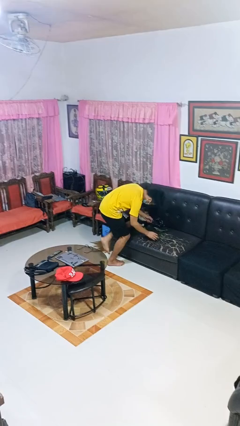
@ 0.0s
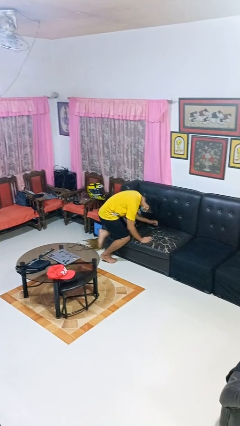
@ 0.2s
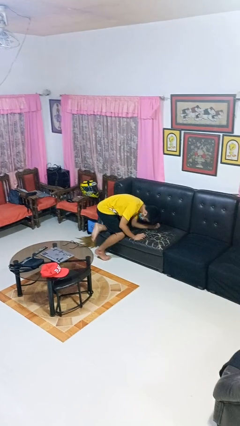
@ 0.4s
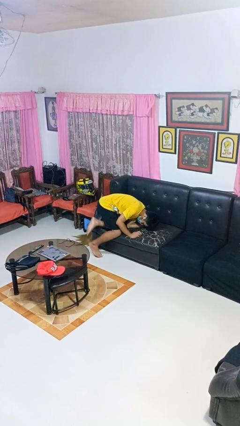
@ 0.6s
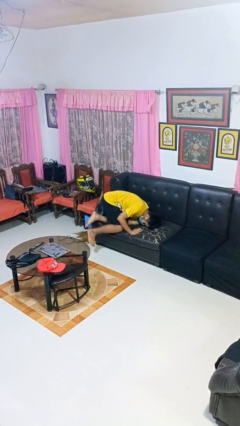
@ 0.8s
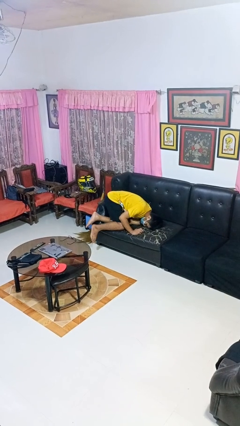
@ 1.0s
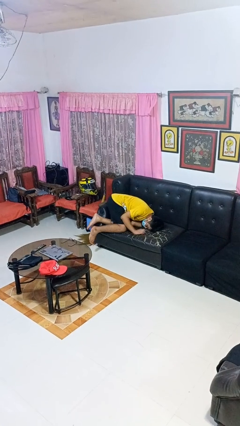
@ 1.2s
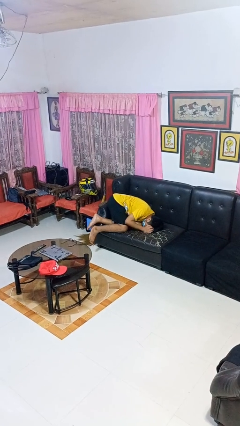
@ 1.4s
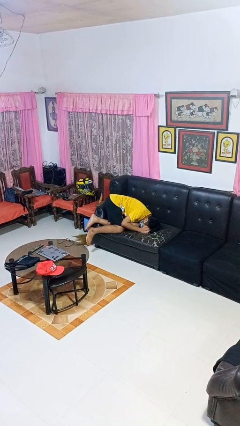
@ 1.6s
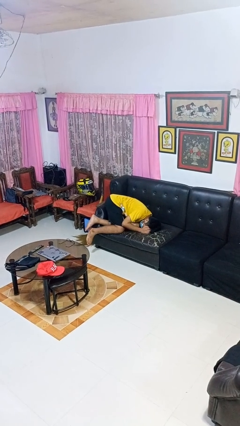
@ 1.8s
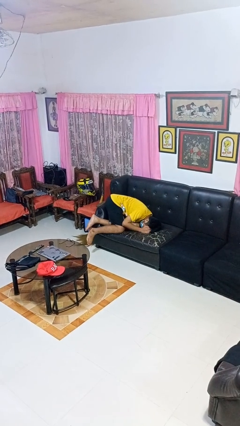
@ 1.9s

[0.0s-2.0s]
person trips on object on floor

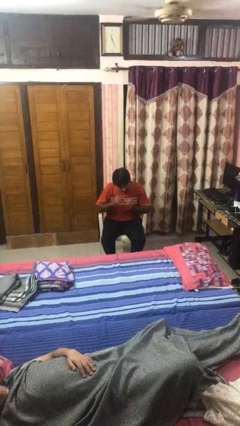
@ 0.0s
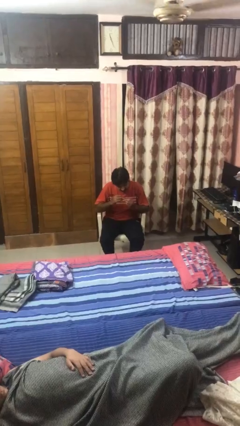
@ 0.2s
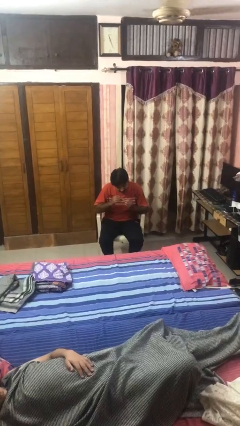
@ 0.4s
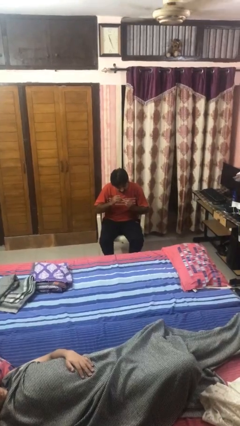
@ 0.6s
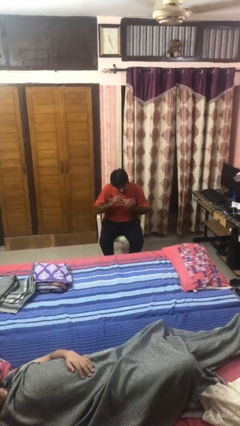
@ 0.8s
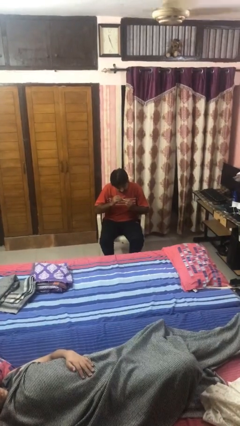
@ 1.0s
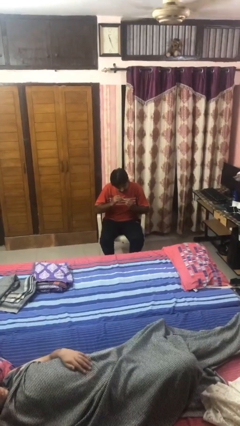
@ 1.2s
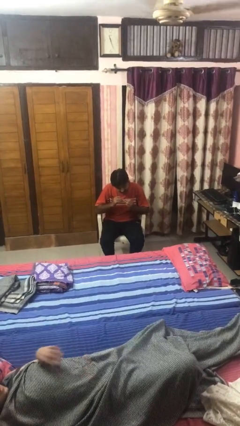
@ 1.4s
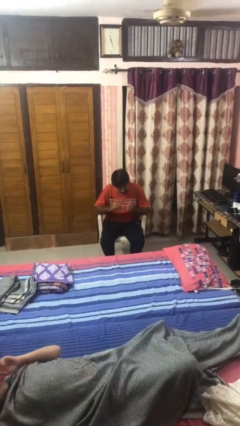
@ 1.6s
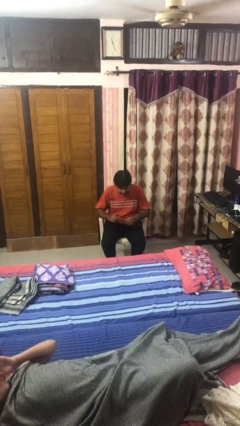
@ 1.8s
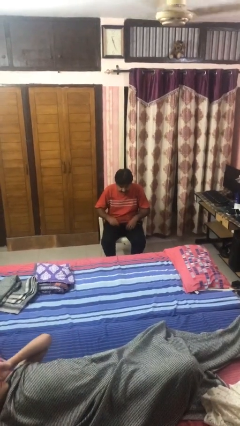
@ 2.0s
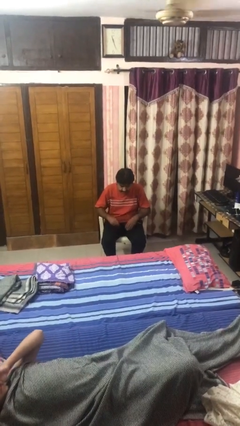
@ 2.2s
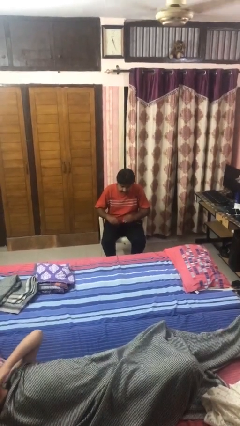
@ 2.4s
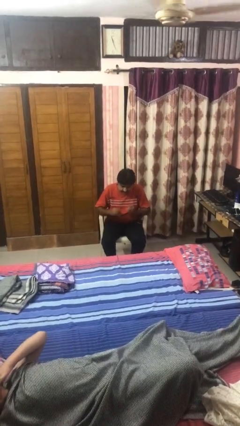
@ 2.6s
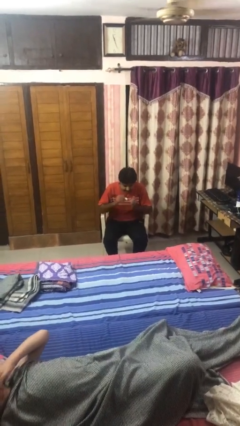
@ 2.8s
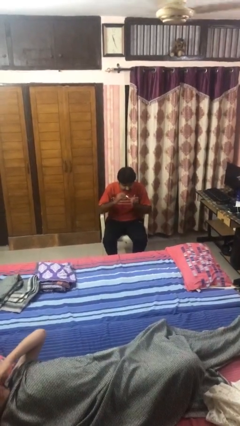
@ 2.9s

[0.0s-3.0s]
person clips fingernails

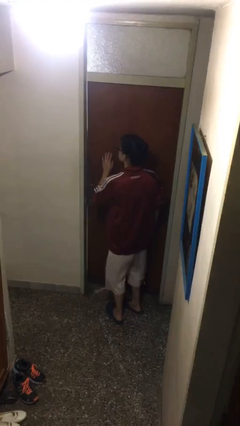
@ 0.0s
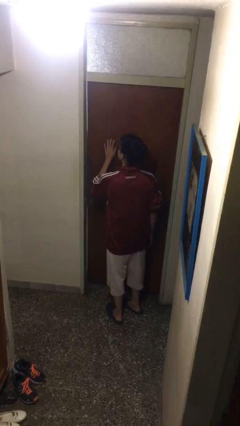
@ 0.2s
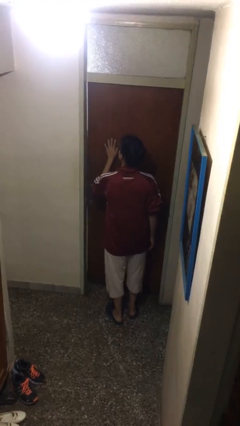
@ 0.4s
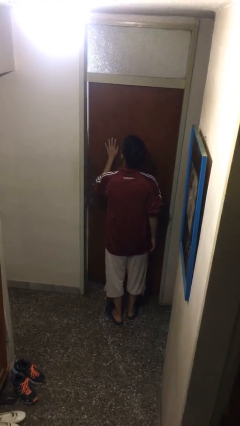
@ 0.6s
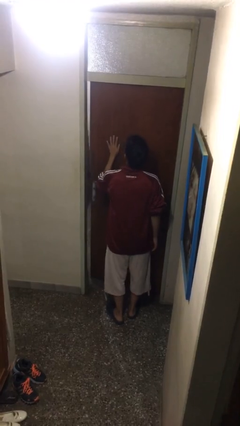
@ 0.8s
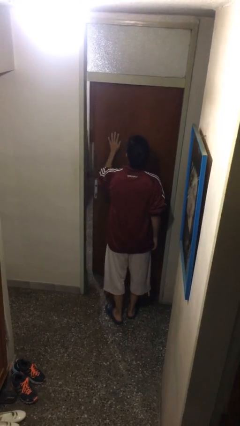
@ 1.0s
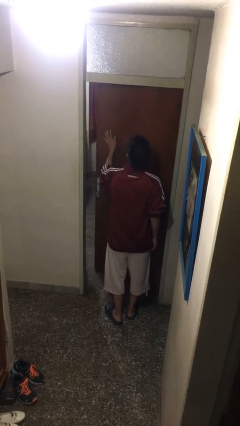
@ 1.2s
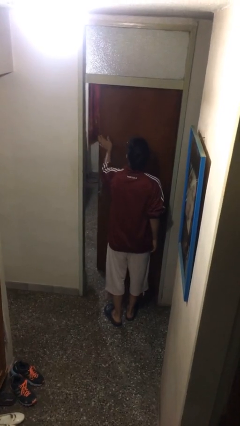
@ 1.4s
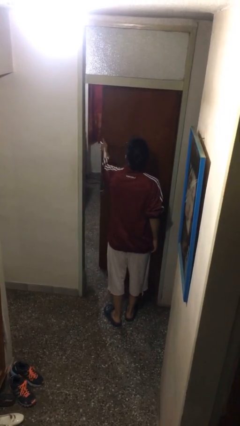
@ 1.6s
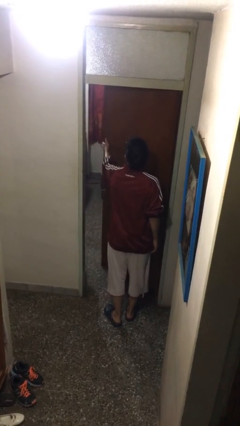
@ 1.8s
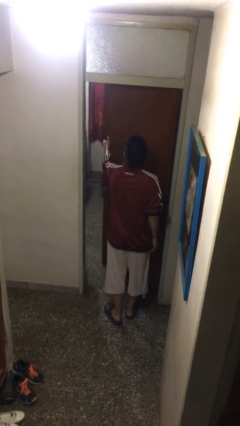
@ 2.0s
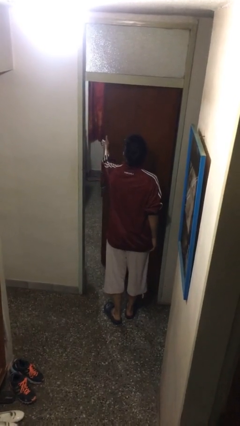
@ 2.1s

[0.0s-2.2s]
person opens facility door

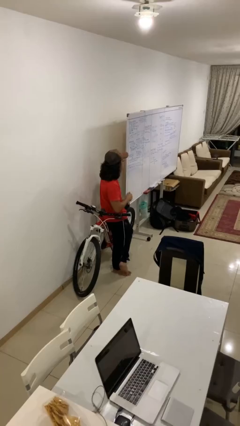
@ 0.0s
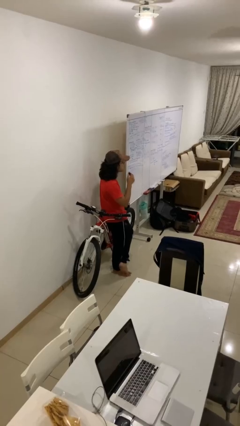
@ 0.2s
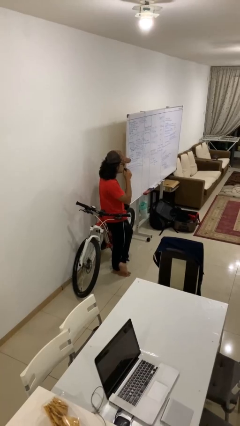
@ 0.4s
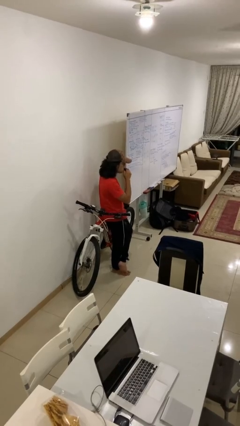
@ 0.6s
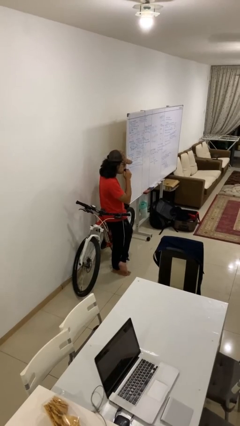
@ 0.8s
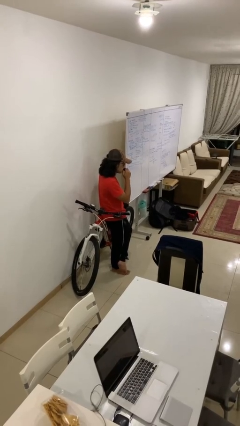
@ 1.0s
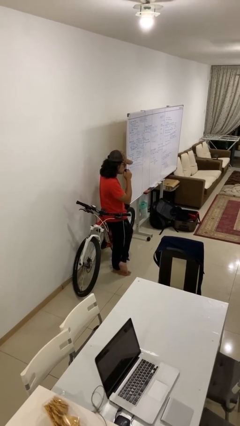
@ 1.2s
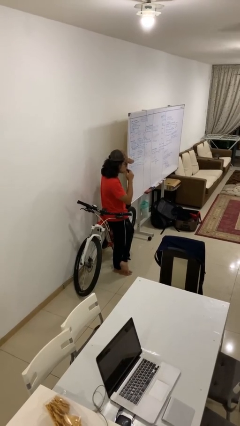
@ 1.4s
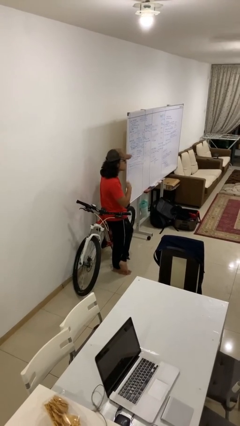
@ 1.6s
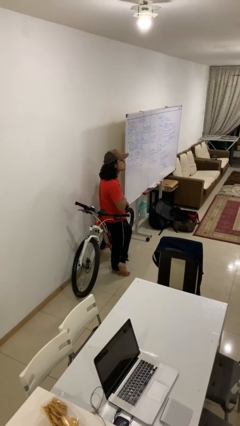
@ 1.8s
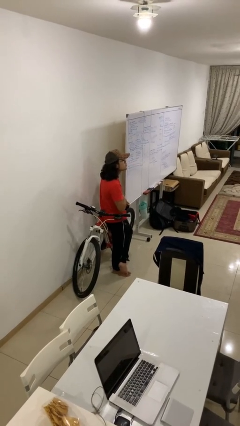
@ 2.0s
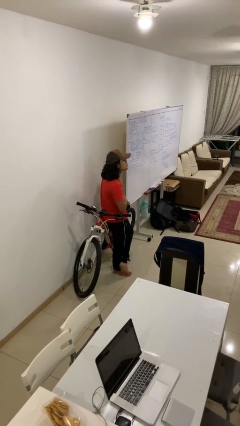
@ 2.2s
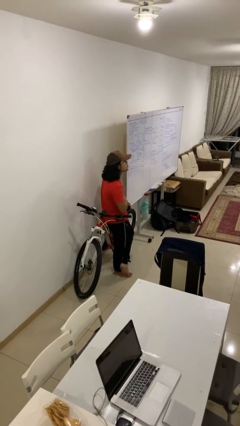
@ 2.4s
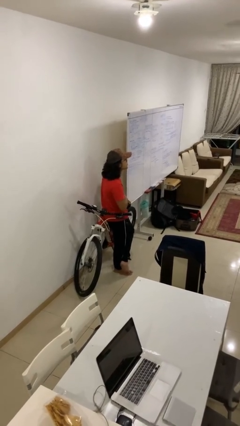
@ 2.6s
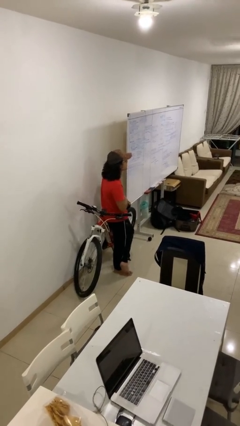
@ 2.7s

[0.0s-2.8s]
person vapes

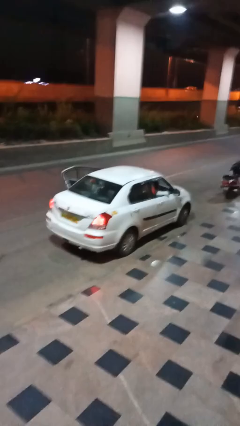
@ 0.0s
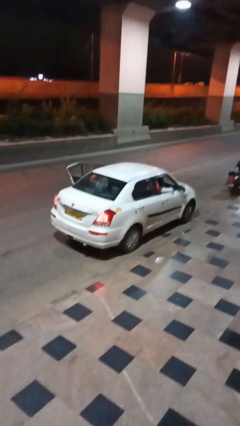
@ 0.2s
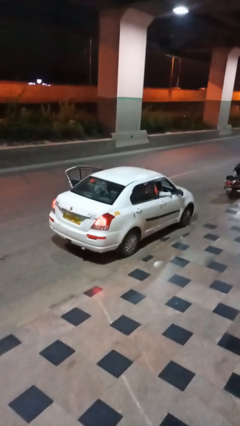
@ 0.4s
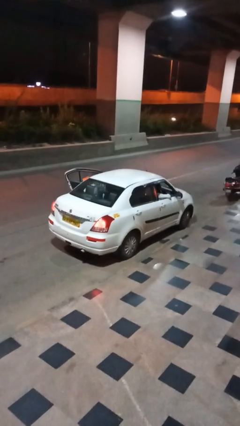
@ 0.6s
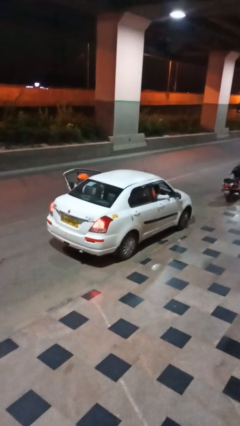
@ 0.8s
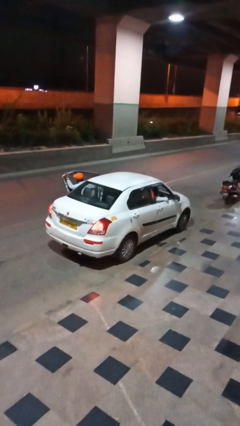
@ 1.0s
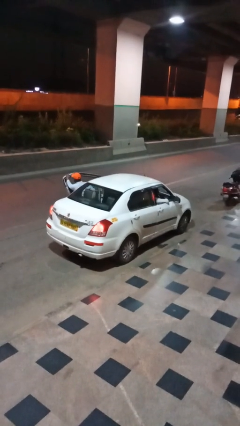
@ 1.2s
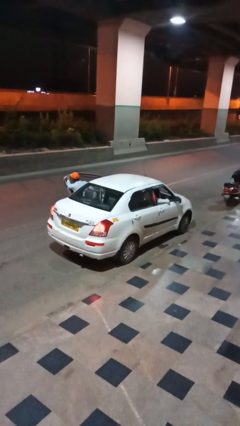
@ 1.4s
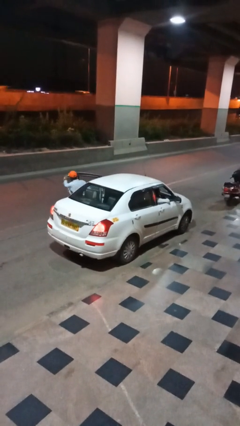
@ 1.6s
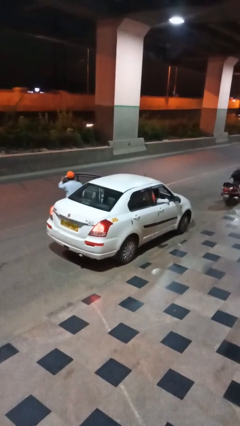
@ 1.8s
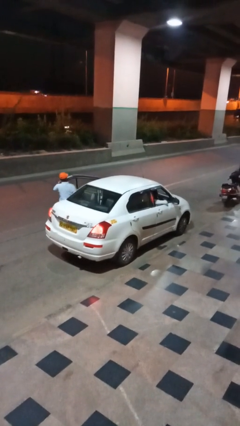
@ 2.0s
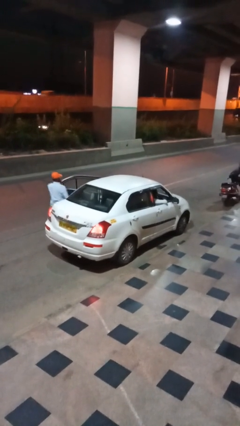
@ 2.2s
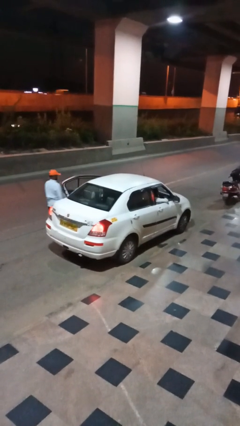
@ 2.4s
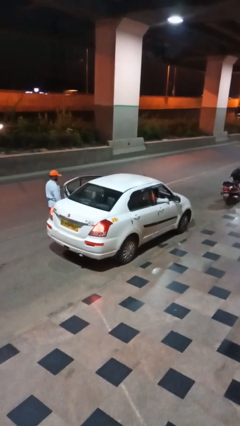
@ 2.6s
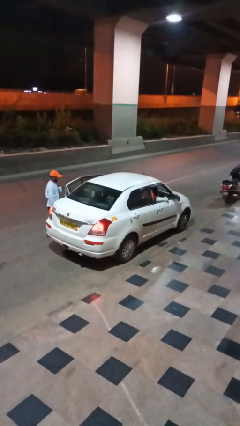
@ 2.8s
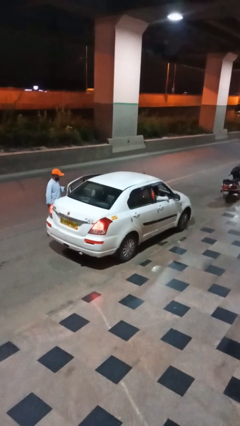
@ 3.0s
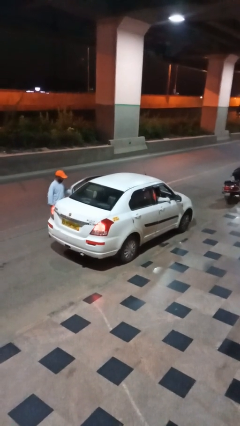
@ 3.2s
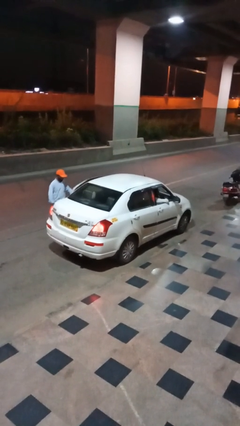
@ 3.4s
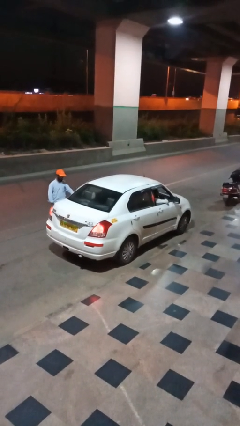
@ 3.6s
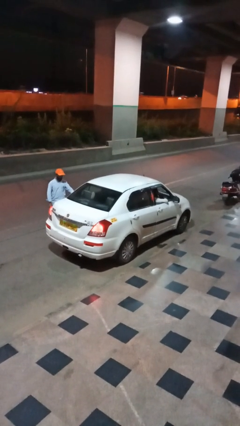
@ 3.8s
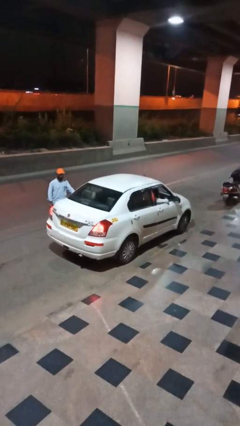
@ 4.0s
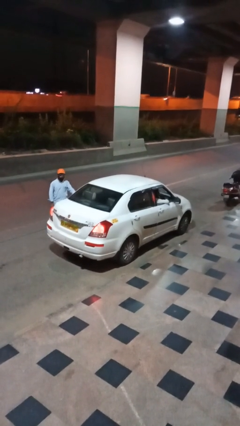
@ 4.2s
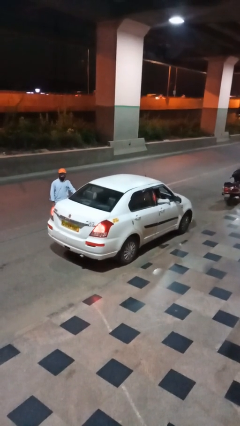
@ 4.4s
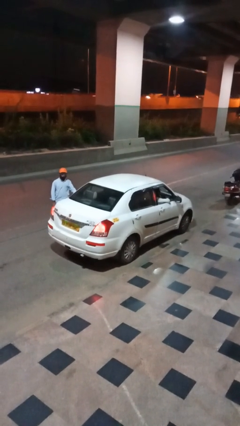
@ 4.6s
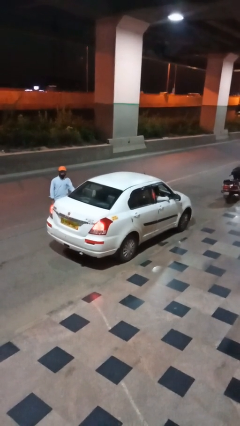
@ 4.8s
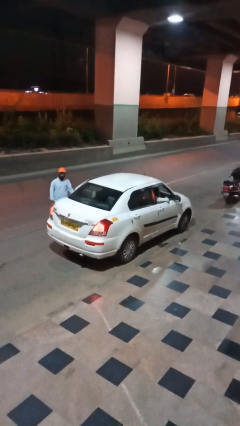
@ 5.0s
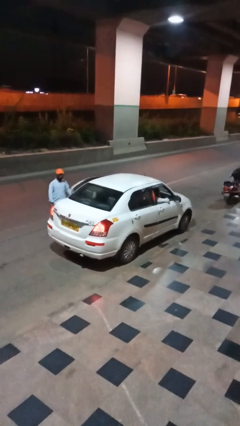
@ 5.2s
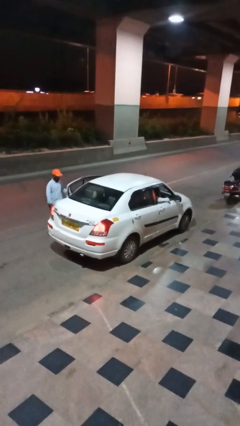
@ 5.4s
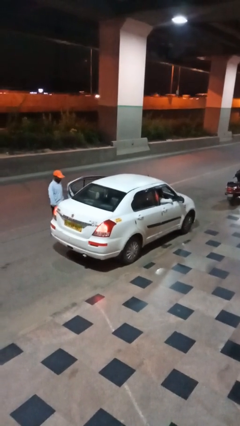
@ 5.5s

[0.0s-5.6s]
car drops off person

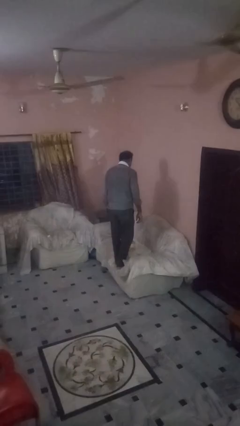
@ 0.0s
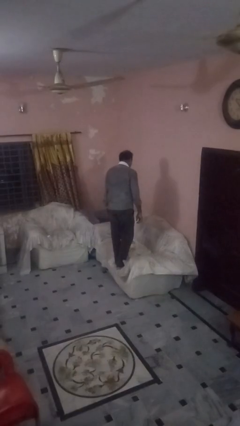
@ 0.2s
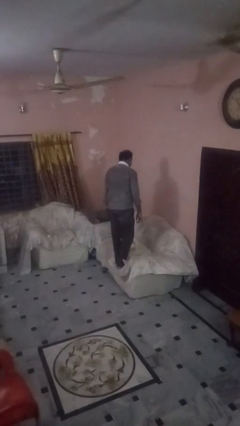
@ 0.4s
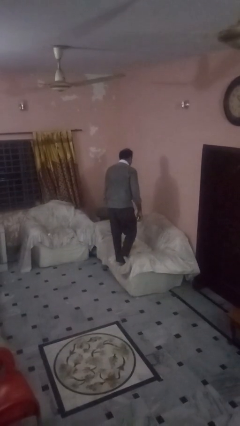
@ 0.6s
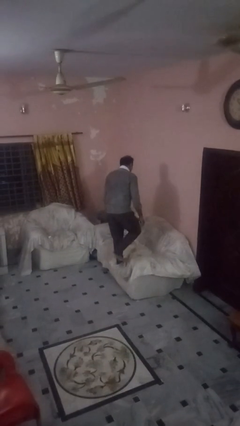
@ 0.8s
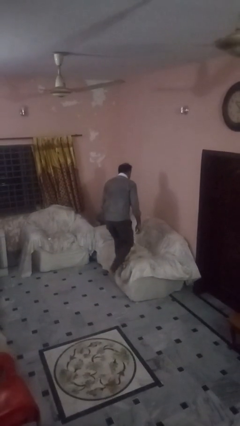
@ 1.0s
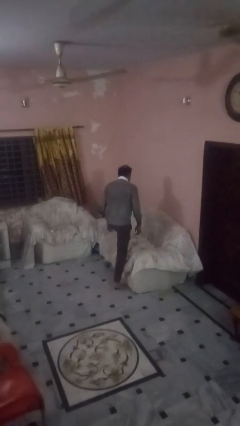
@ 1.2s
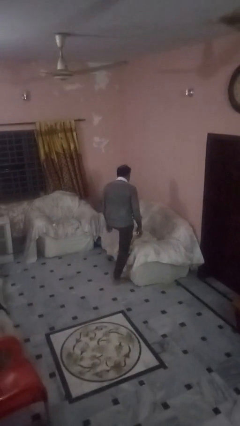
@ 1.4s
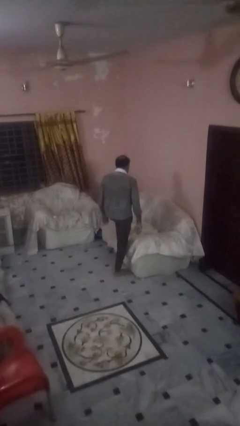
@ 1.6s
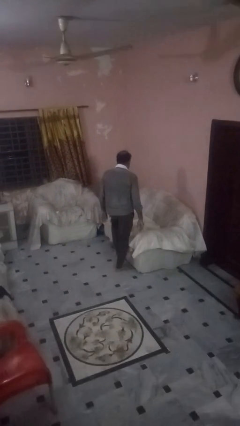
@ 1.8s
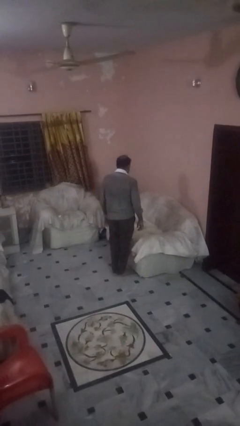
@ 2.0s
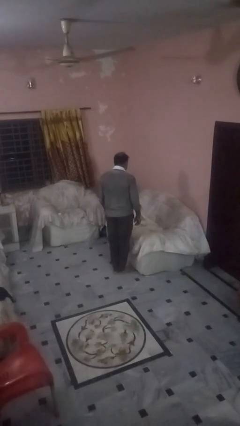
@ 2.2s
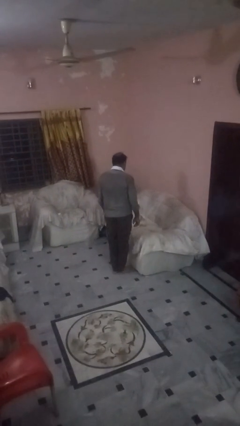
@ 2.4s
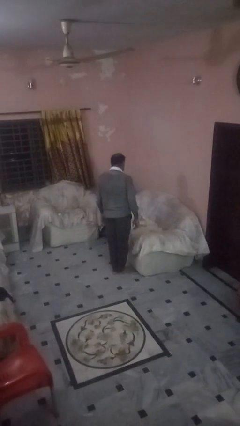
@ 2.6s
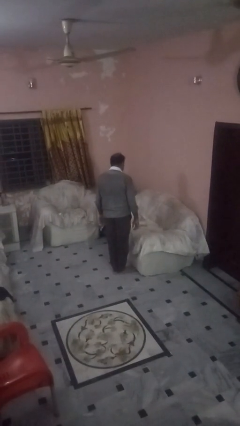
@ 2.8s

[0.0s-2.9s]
person climbs off couch
